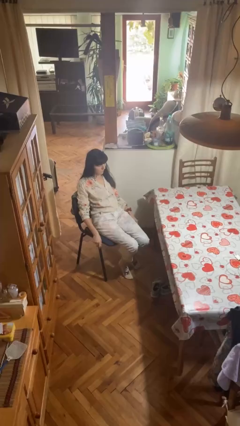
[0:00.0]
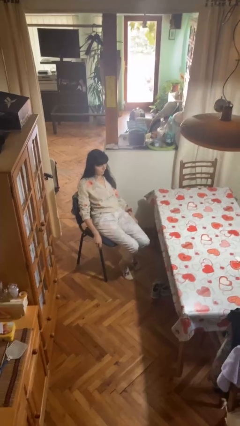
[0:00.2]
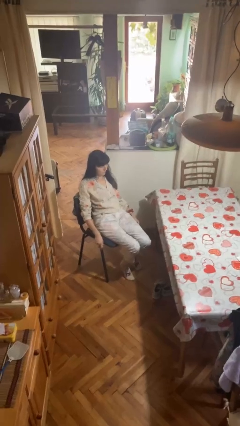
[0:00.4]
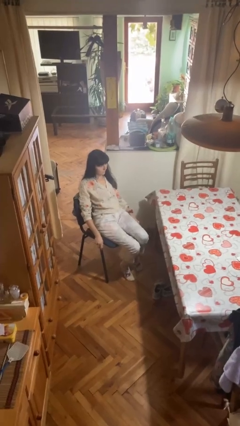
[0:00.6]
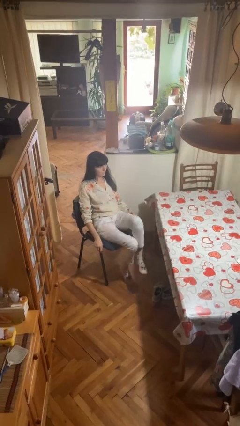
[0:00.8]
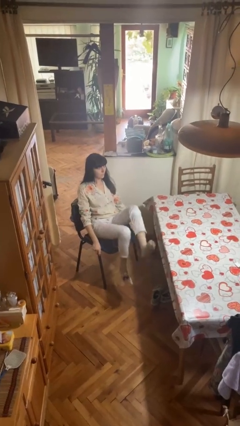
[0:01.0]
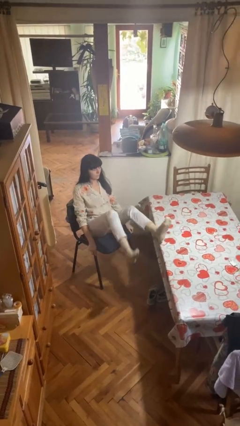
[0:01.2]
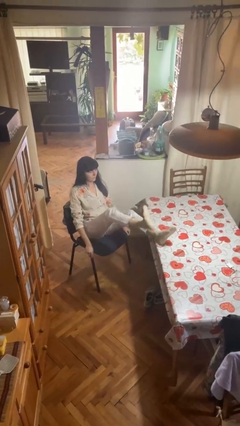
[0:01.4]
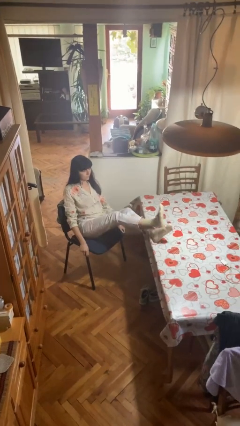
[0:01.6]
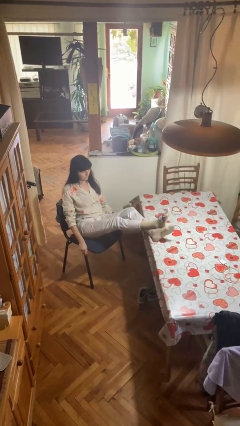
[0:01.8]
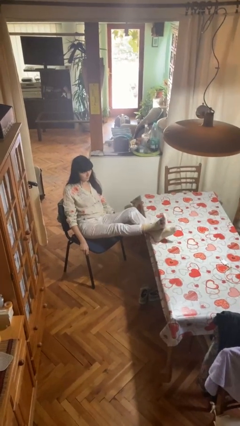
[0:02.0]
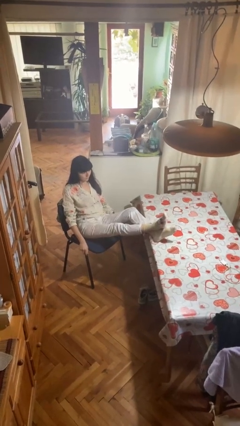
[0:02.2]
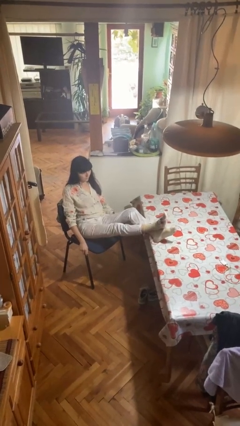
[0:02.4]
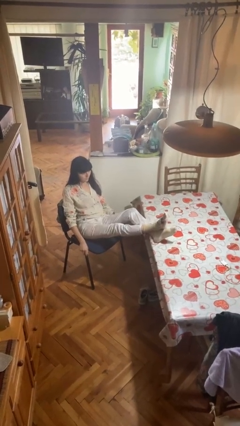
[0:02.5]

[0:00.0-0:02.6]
person puts feet up

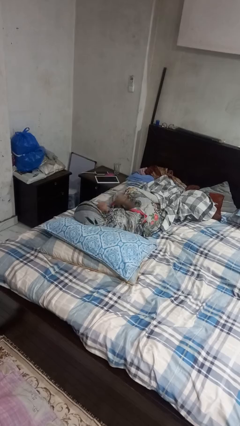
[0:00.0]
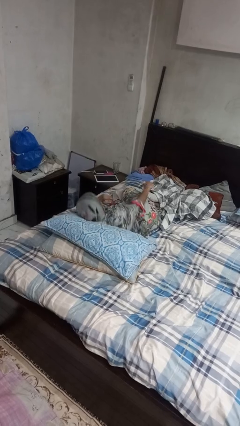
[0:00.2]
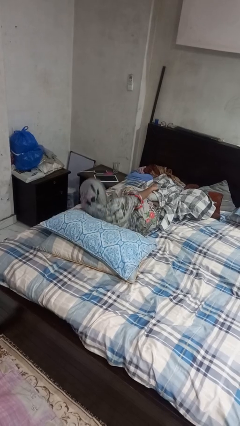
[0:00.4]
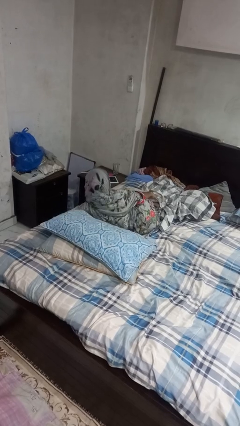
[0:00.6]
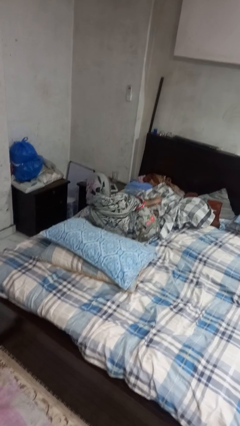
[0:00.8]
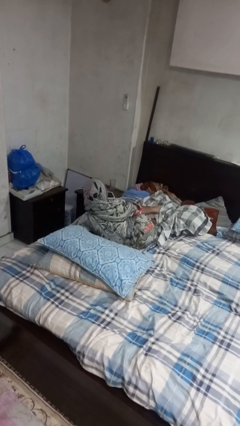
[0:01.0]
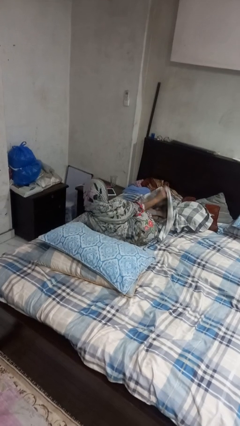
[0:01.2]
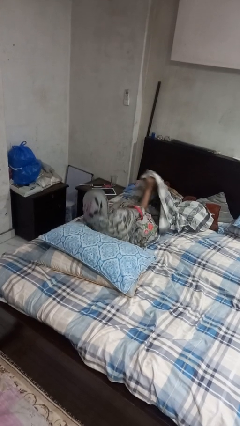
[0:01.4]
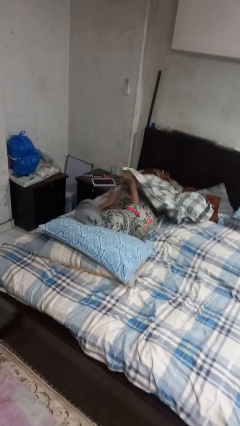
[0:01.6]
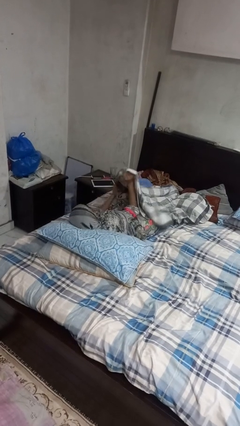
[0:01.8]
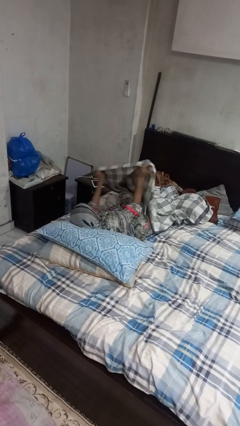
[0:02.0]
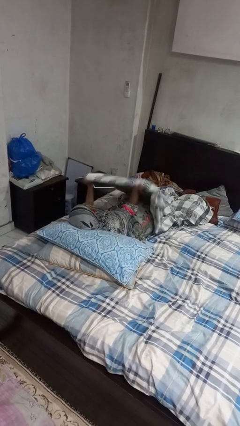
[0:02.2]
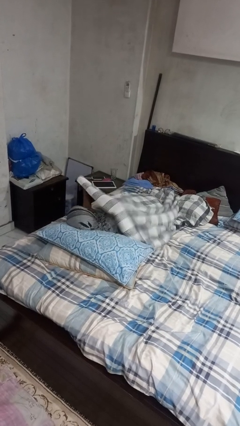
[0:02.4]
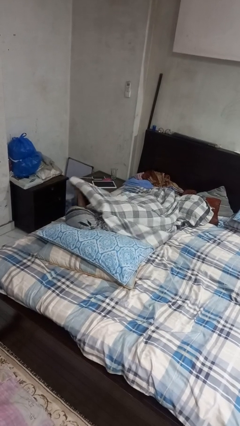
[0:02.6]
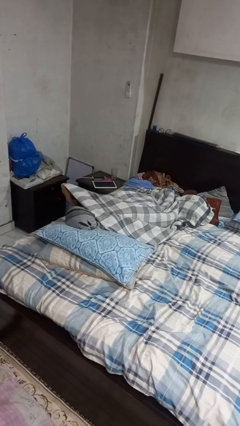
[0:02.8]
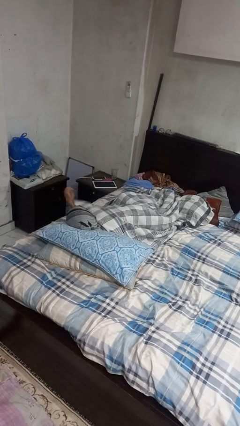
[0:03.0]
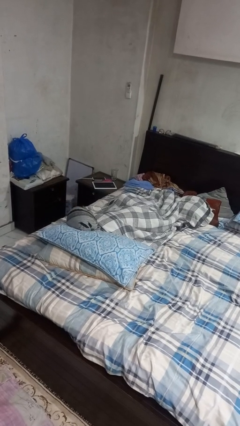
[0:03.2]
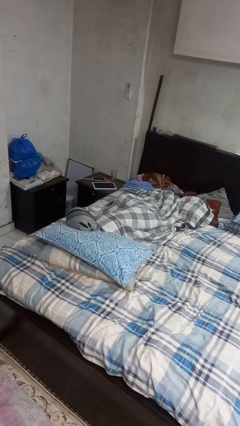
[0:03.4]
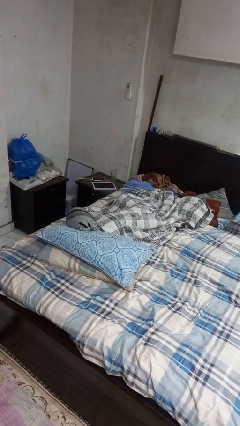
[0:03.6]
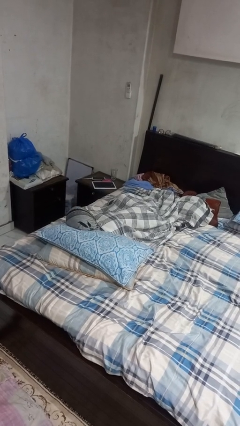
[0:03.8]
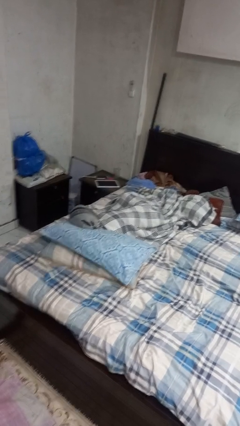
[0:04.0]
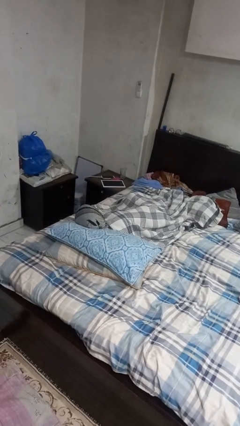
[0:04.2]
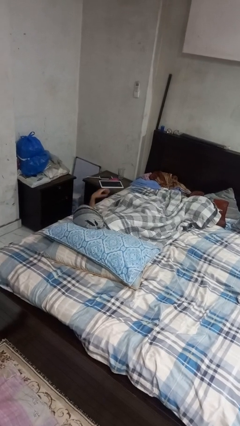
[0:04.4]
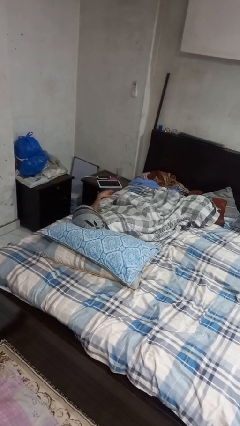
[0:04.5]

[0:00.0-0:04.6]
person covers with bedsheets

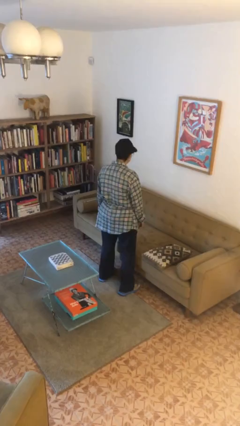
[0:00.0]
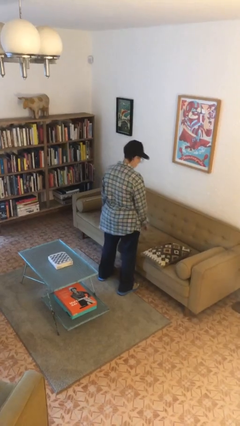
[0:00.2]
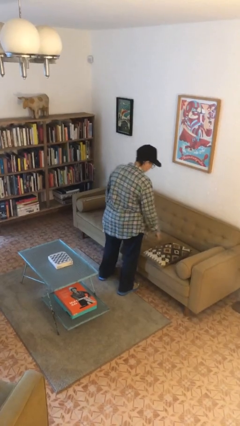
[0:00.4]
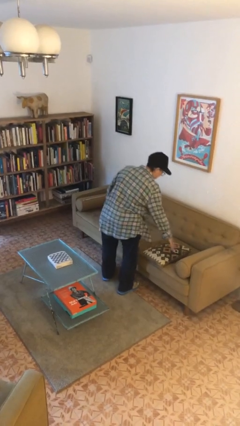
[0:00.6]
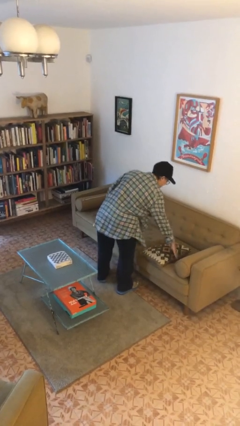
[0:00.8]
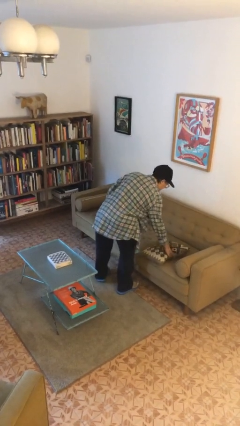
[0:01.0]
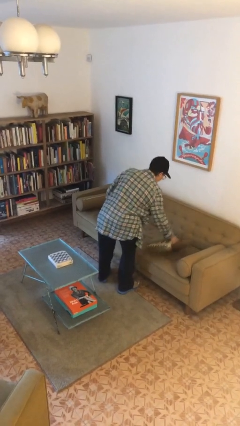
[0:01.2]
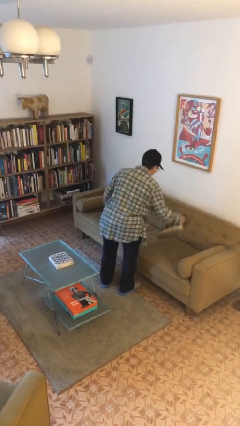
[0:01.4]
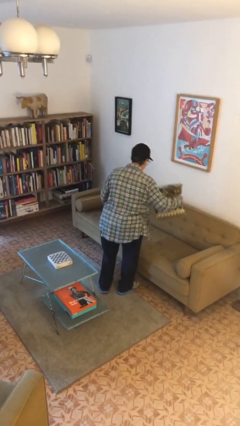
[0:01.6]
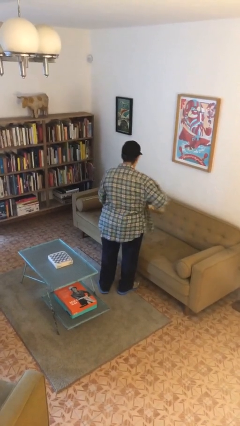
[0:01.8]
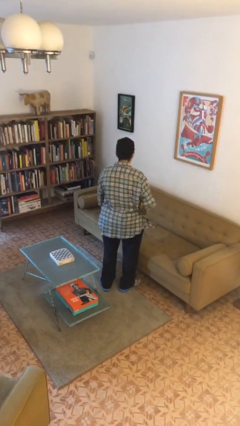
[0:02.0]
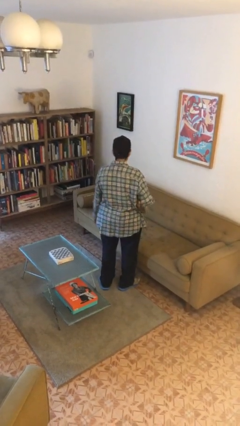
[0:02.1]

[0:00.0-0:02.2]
person picks up object from couch

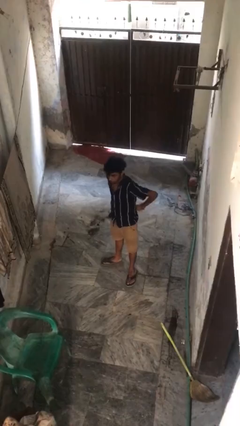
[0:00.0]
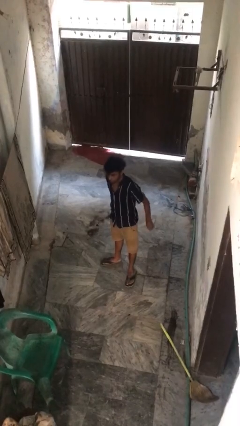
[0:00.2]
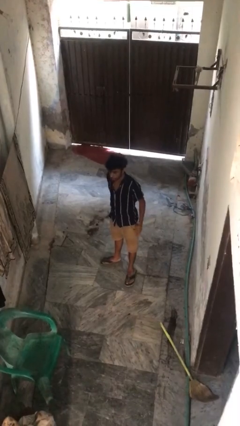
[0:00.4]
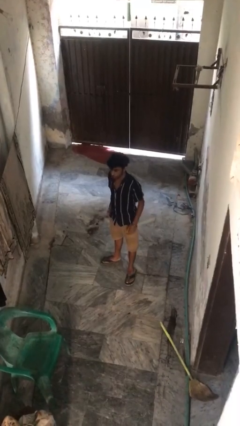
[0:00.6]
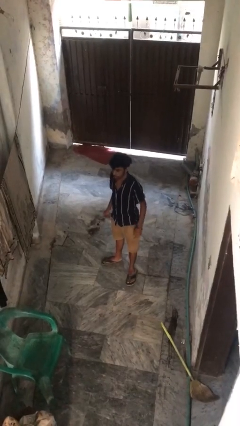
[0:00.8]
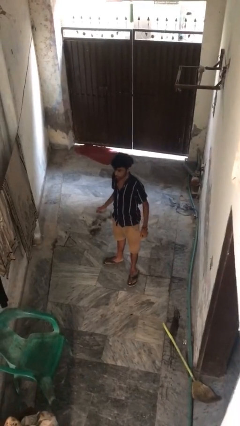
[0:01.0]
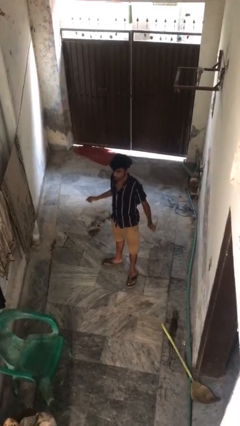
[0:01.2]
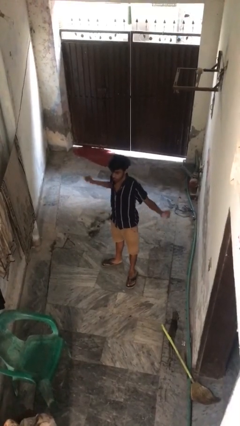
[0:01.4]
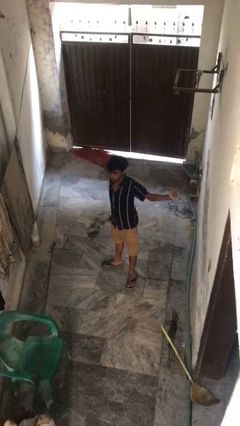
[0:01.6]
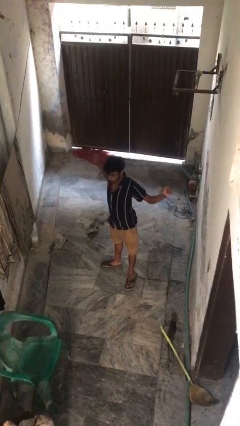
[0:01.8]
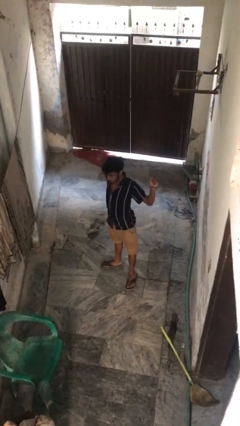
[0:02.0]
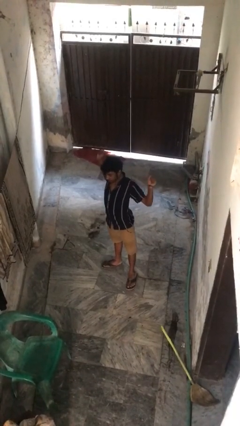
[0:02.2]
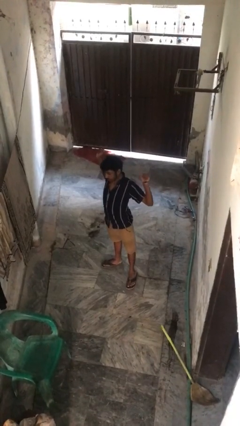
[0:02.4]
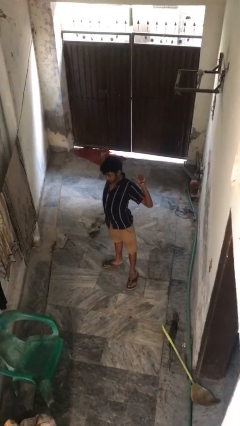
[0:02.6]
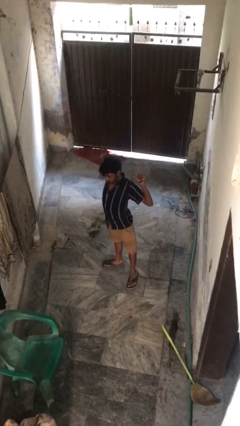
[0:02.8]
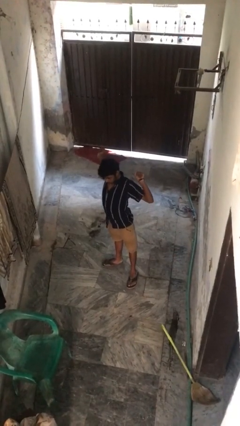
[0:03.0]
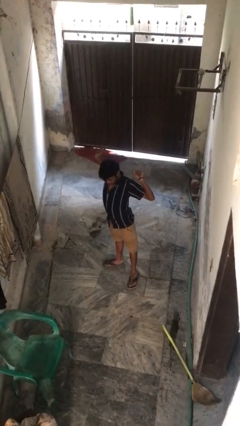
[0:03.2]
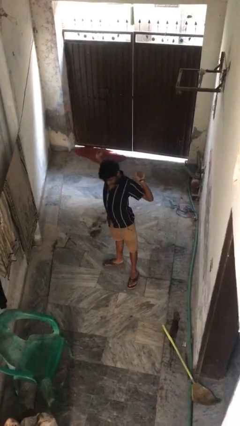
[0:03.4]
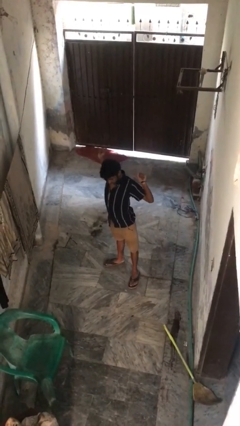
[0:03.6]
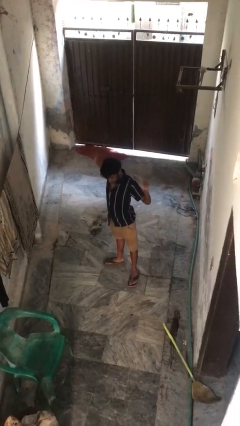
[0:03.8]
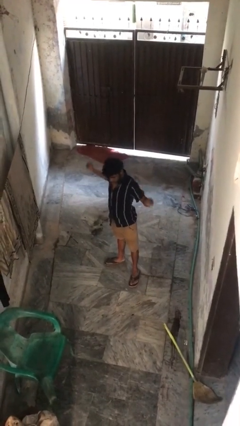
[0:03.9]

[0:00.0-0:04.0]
person stretches arms to side

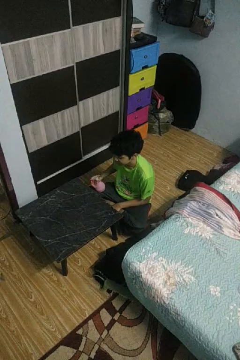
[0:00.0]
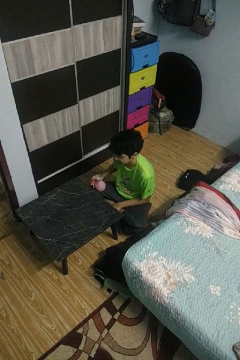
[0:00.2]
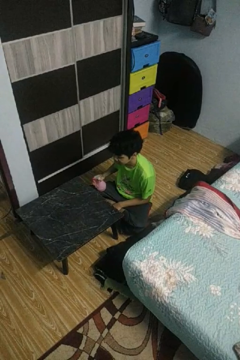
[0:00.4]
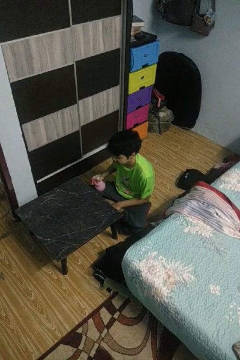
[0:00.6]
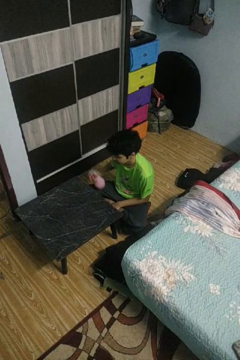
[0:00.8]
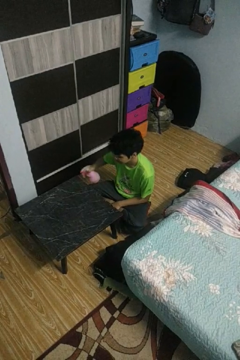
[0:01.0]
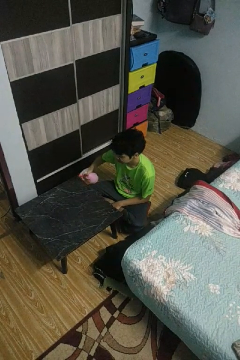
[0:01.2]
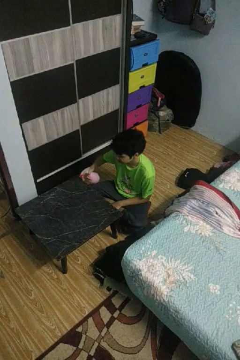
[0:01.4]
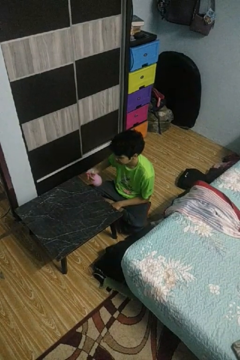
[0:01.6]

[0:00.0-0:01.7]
person sprays from bottle

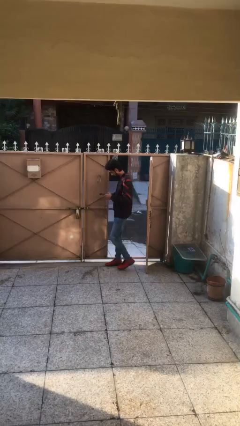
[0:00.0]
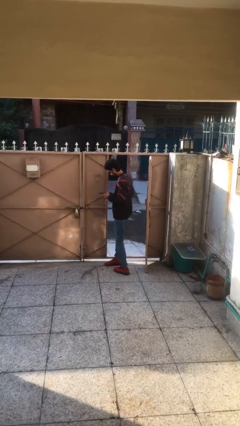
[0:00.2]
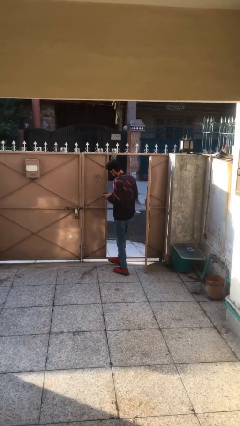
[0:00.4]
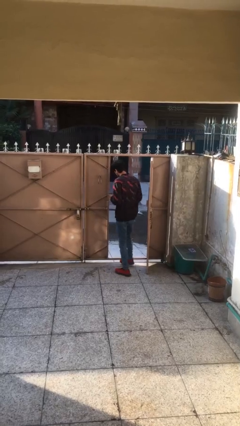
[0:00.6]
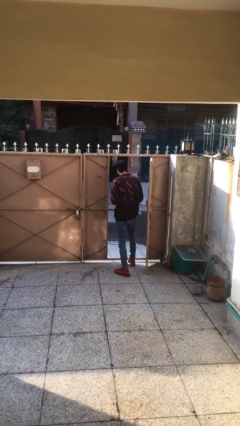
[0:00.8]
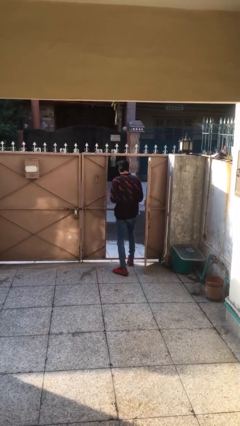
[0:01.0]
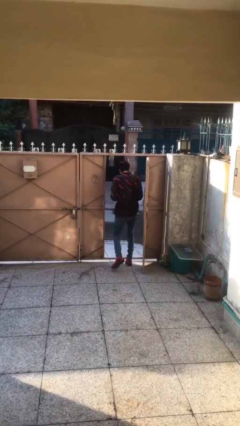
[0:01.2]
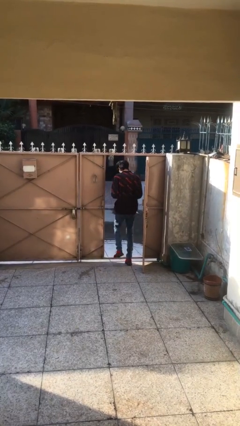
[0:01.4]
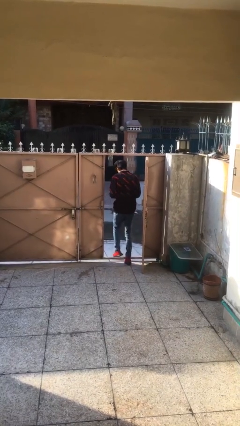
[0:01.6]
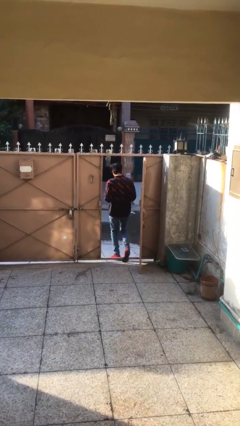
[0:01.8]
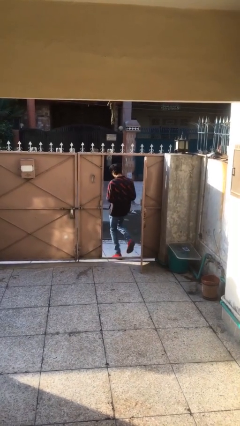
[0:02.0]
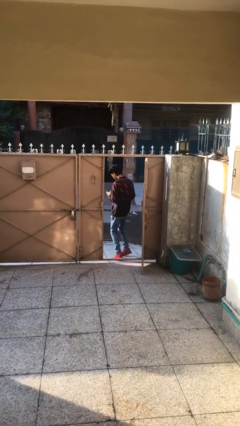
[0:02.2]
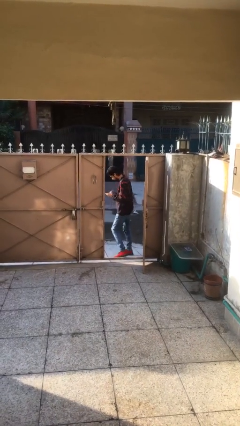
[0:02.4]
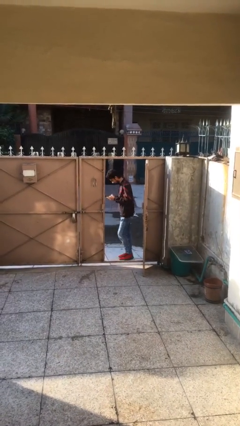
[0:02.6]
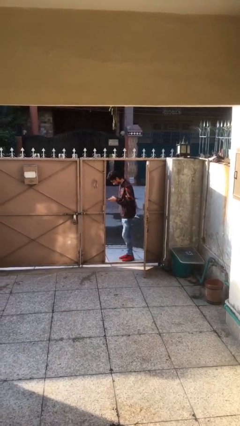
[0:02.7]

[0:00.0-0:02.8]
person exits scene through structure
